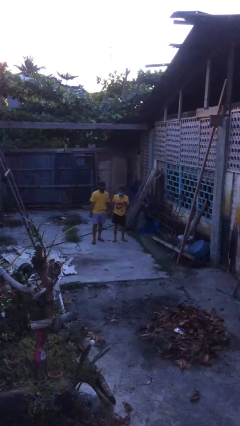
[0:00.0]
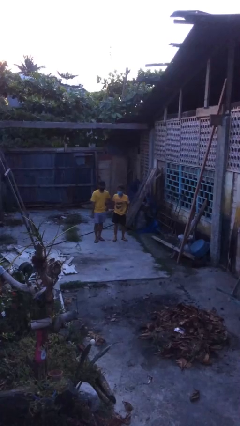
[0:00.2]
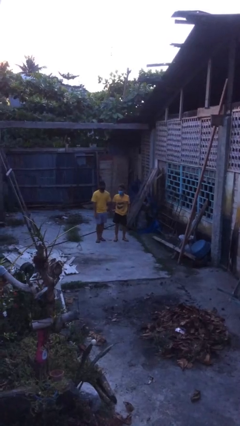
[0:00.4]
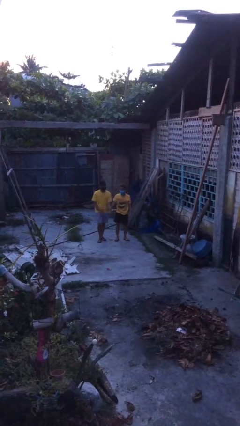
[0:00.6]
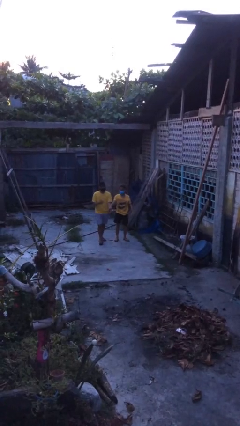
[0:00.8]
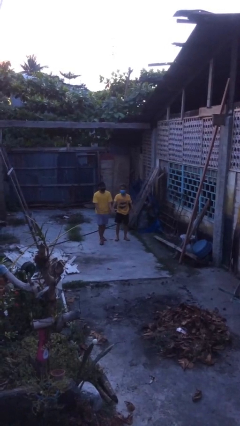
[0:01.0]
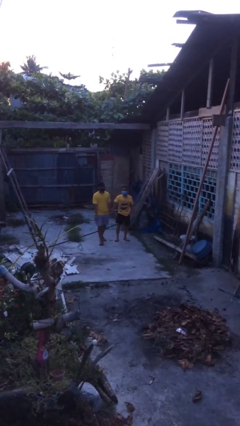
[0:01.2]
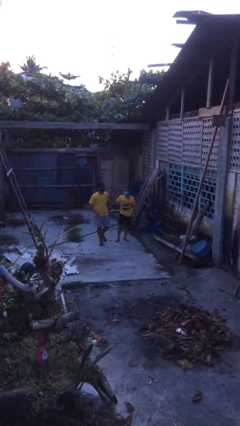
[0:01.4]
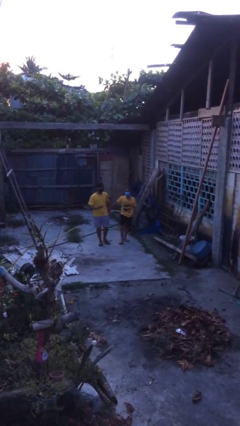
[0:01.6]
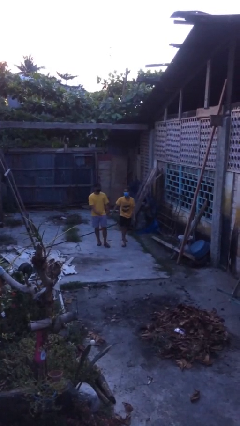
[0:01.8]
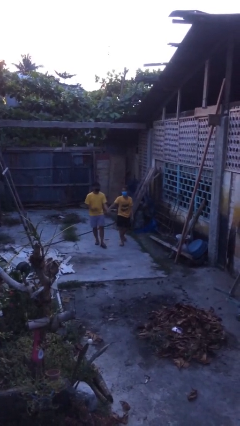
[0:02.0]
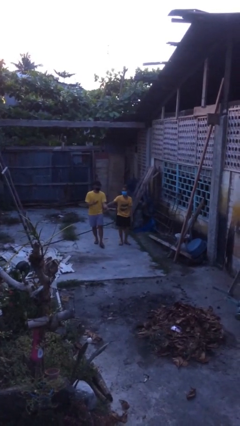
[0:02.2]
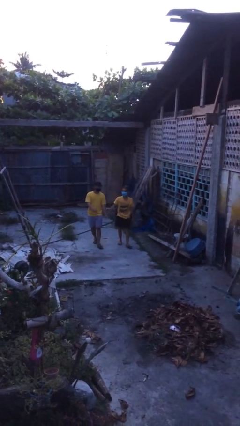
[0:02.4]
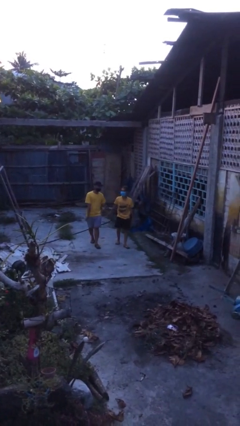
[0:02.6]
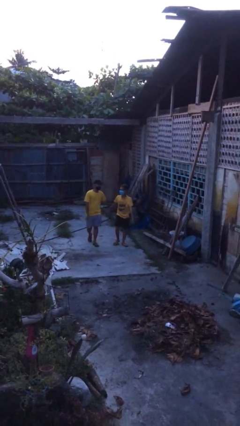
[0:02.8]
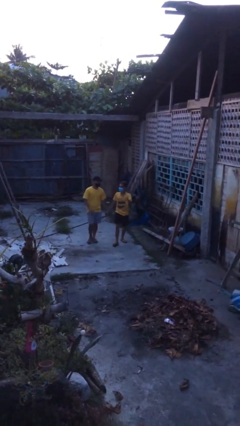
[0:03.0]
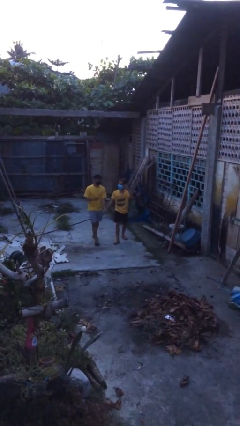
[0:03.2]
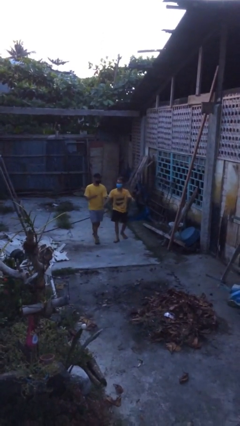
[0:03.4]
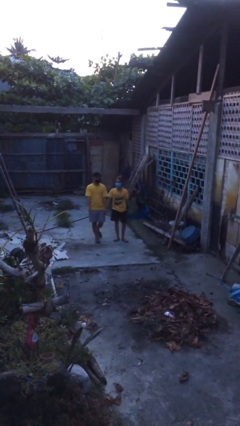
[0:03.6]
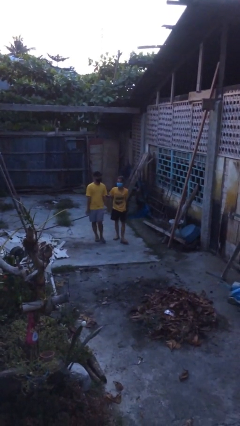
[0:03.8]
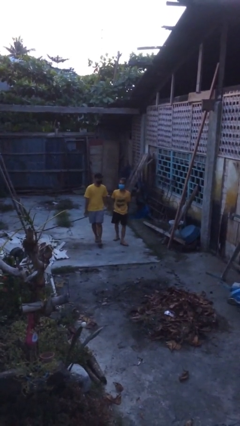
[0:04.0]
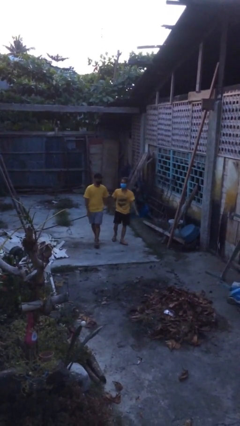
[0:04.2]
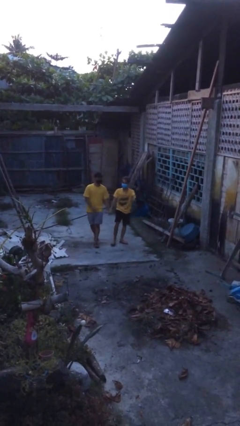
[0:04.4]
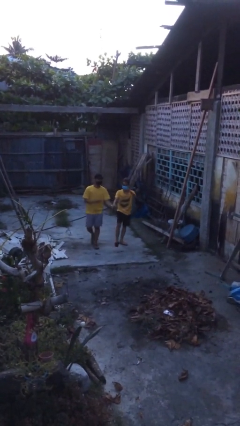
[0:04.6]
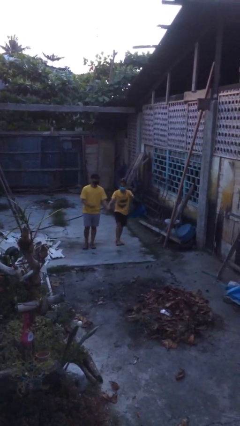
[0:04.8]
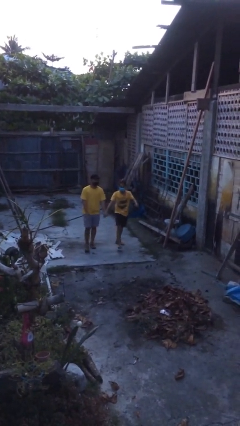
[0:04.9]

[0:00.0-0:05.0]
person holds hand

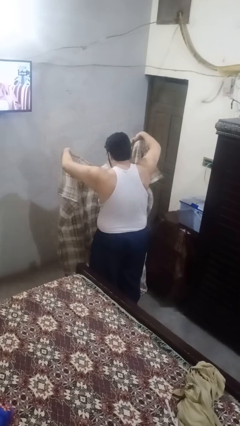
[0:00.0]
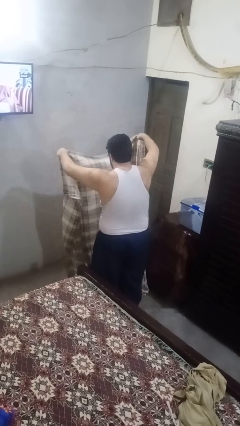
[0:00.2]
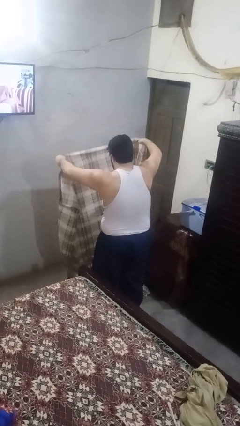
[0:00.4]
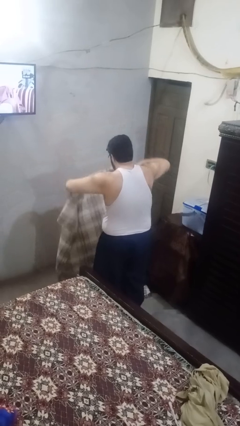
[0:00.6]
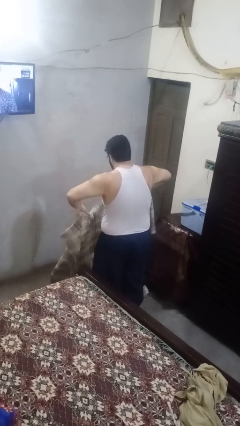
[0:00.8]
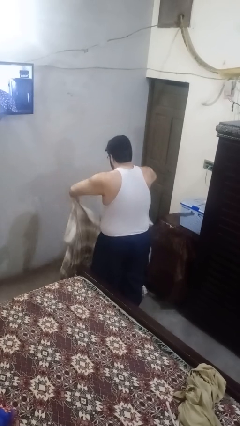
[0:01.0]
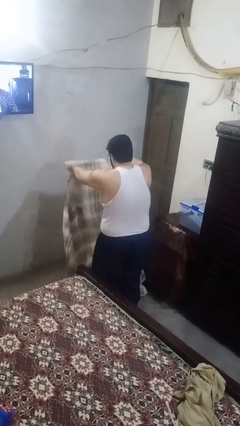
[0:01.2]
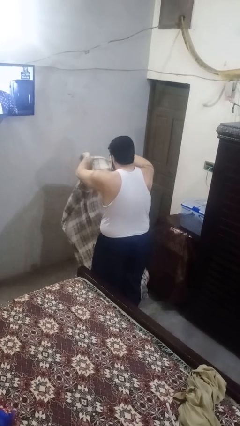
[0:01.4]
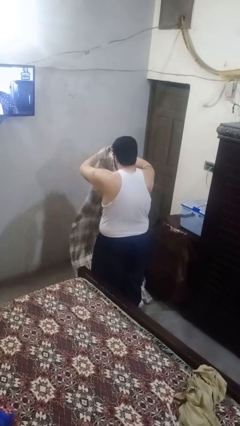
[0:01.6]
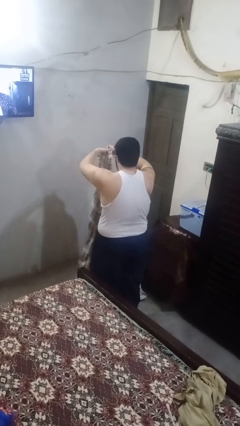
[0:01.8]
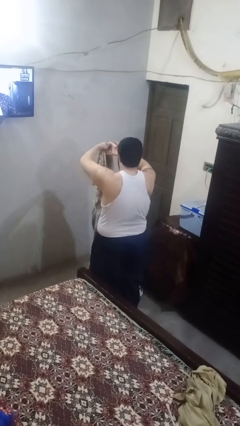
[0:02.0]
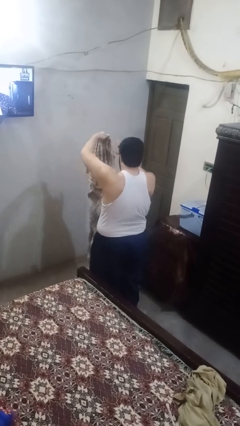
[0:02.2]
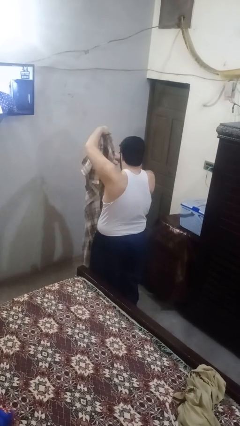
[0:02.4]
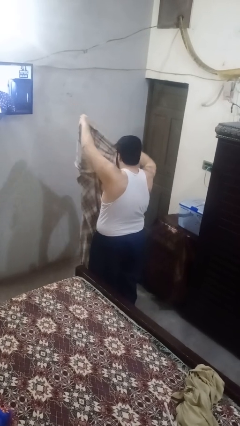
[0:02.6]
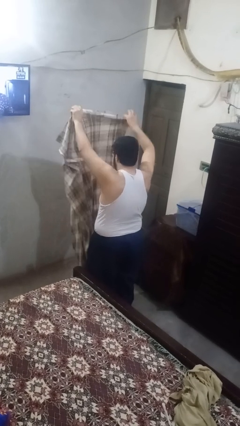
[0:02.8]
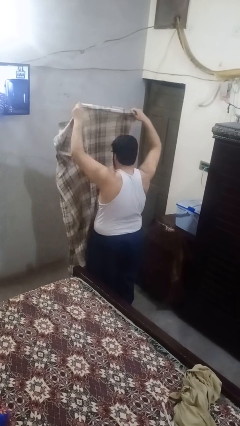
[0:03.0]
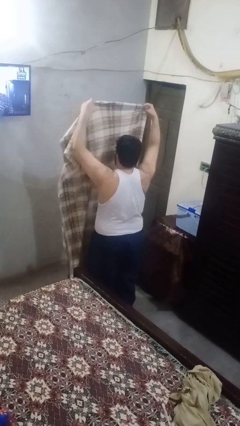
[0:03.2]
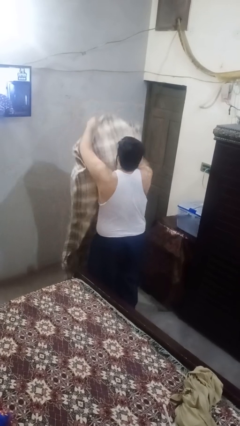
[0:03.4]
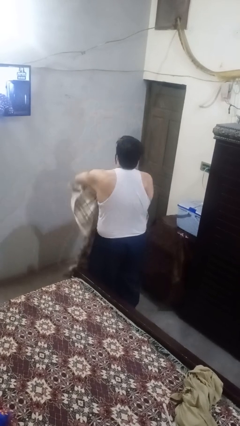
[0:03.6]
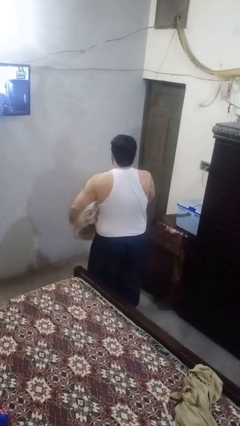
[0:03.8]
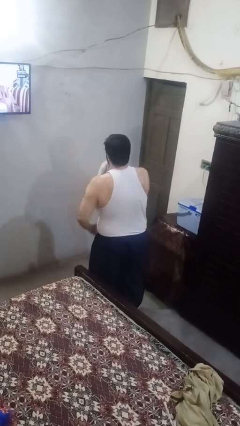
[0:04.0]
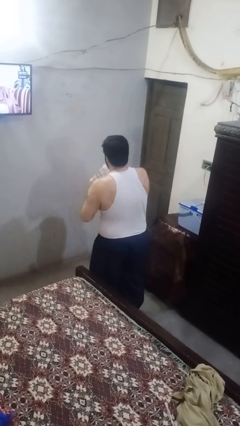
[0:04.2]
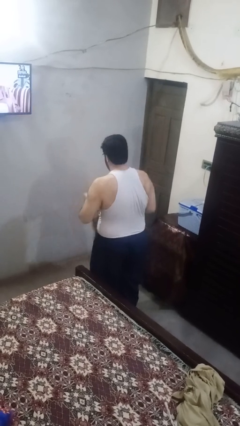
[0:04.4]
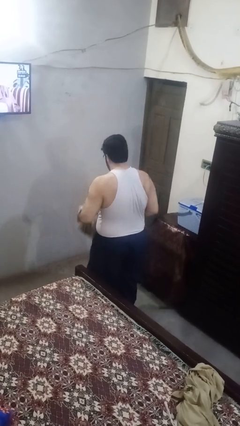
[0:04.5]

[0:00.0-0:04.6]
person folds blanket

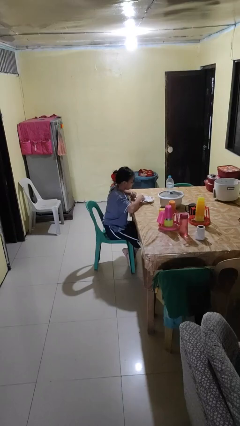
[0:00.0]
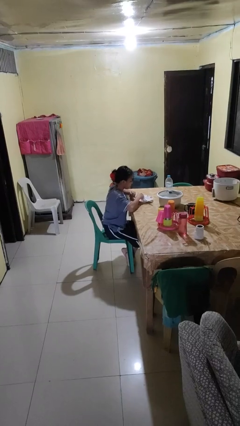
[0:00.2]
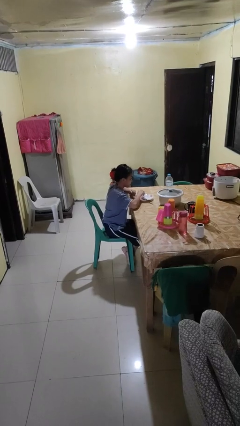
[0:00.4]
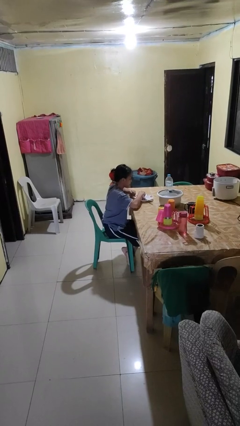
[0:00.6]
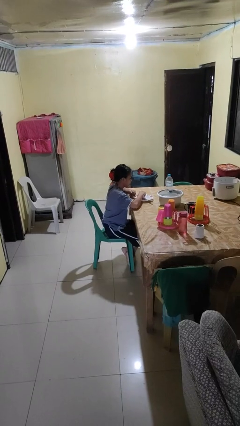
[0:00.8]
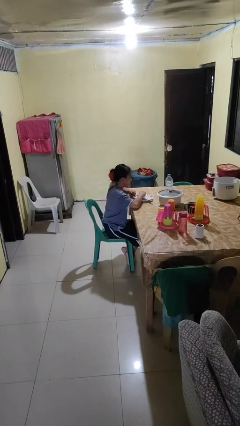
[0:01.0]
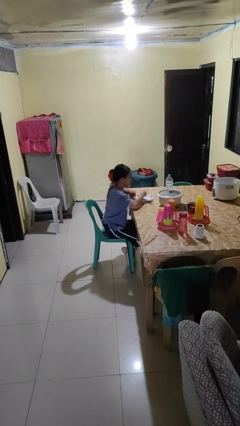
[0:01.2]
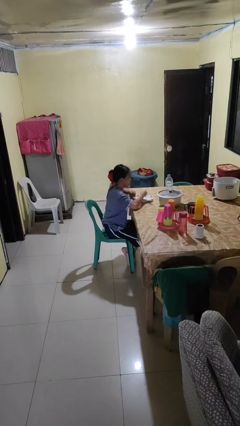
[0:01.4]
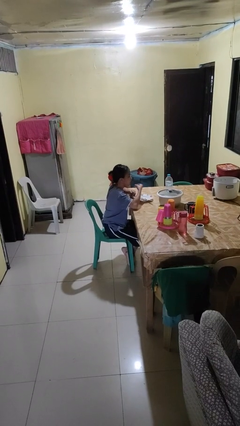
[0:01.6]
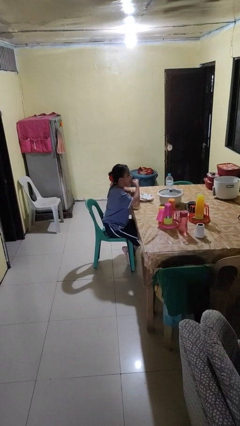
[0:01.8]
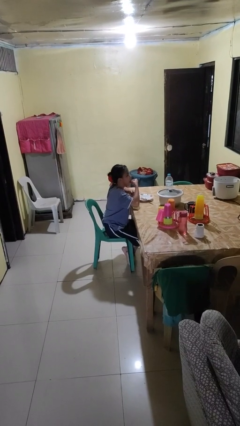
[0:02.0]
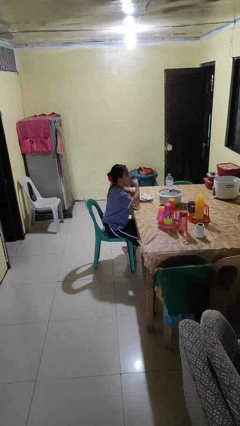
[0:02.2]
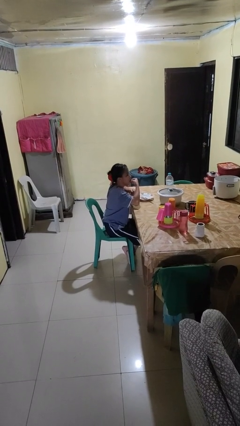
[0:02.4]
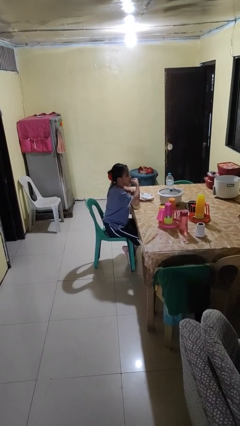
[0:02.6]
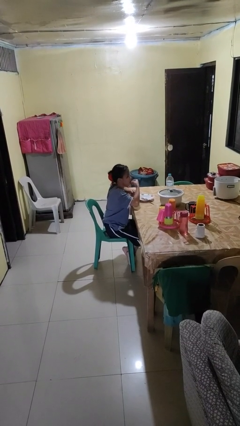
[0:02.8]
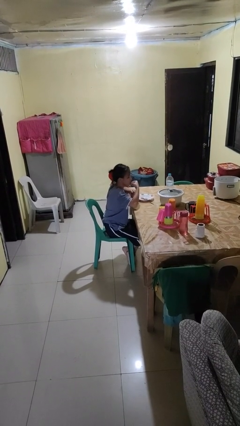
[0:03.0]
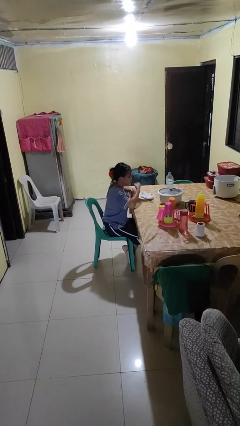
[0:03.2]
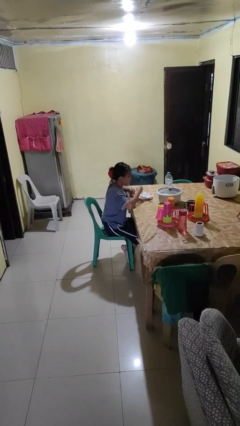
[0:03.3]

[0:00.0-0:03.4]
person eats with hands

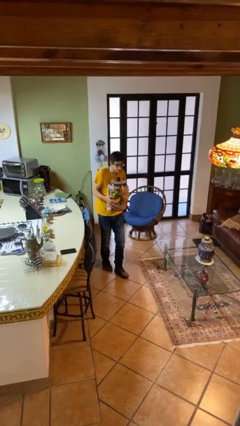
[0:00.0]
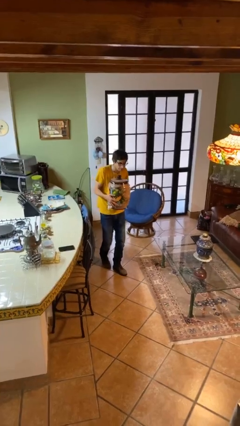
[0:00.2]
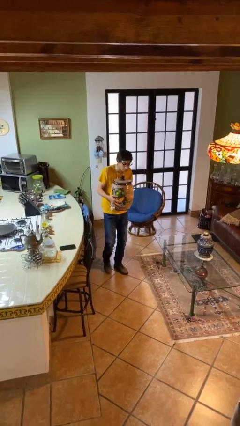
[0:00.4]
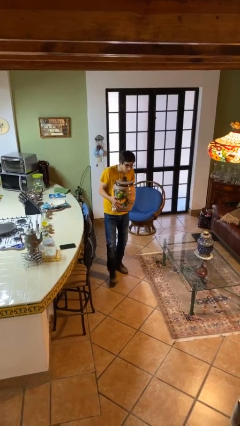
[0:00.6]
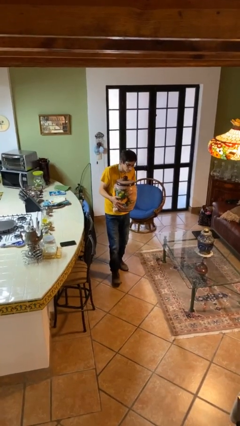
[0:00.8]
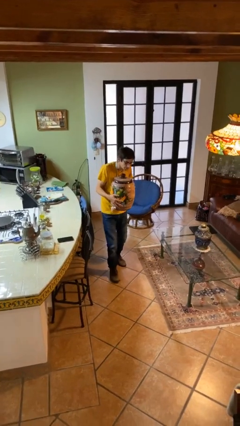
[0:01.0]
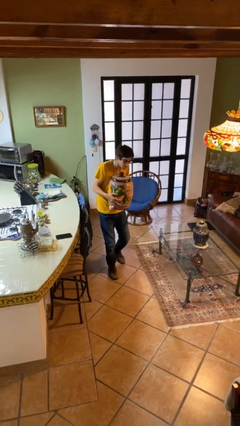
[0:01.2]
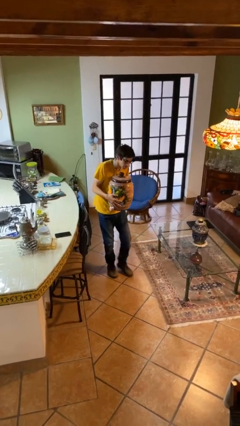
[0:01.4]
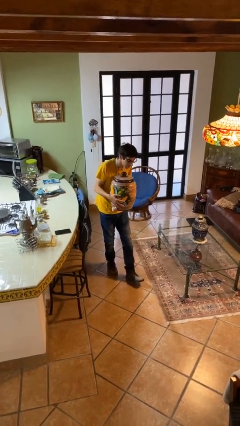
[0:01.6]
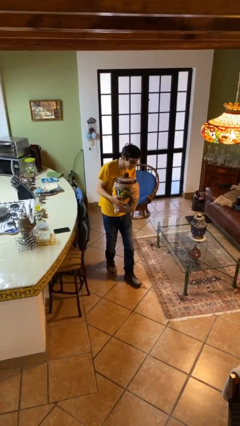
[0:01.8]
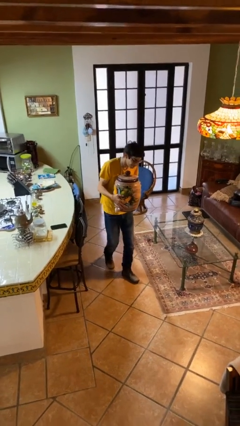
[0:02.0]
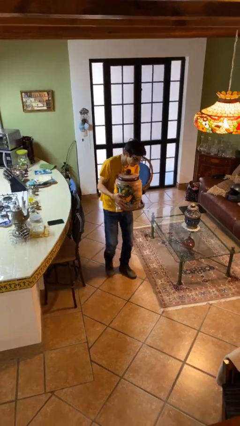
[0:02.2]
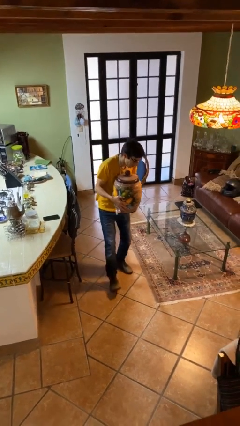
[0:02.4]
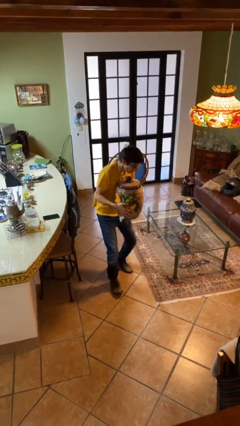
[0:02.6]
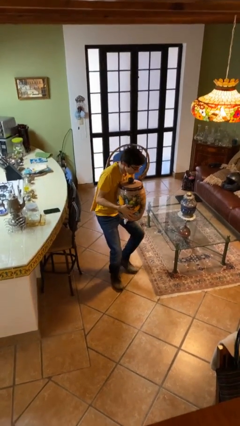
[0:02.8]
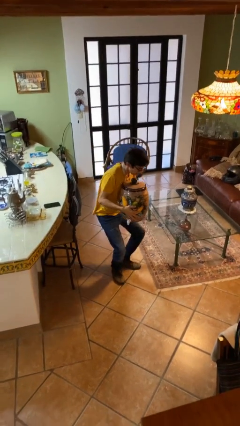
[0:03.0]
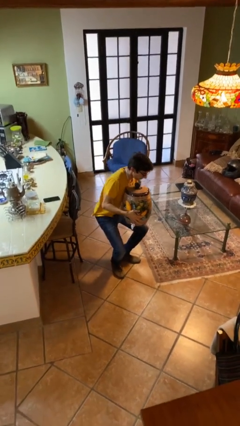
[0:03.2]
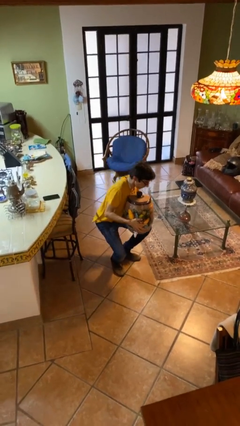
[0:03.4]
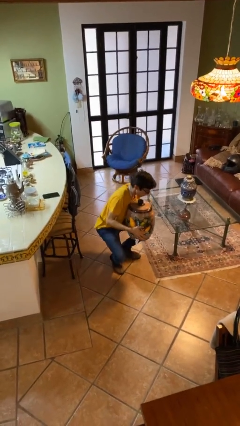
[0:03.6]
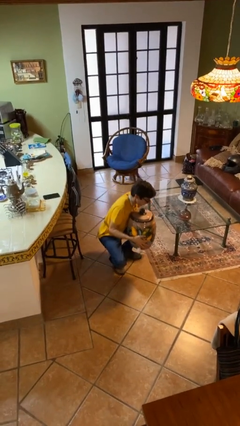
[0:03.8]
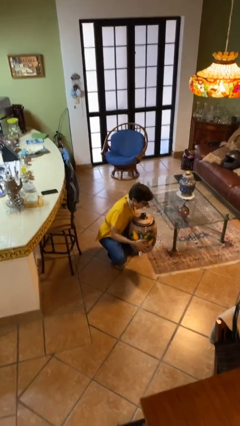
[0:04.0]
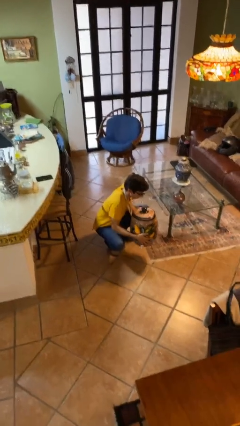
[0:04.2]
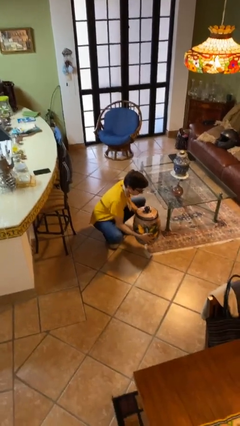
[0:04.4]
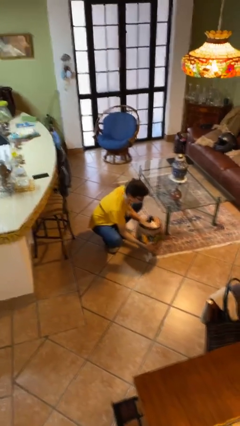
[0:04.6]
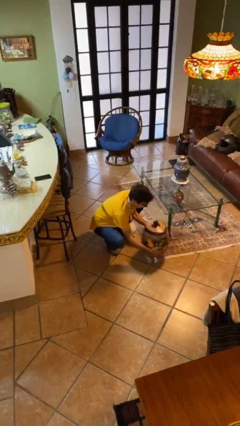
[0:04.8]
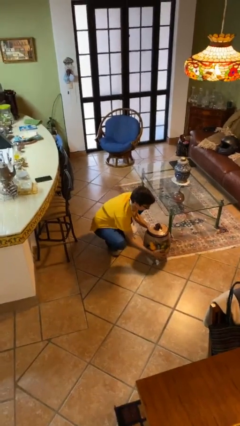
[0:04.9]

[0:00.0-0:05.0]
person carries heavy object
